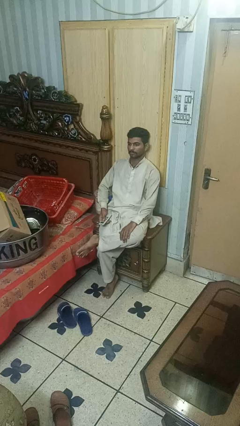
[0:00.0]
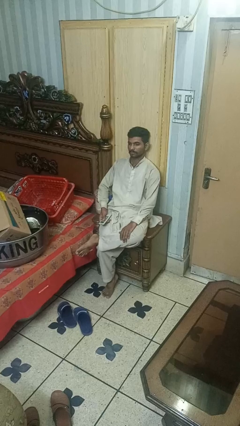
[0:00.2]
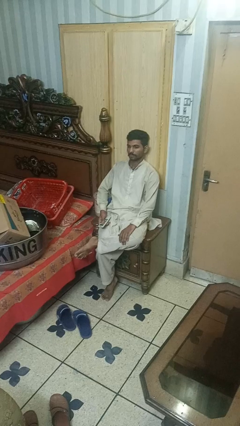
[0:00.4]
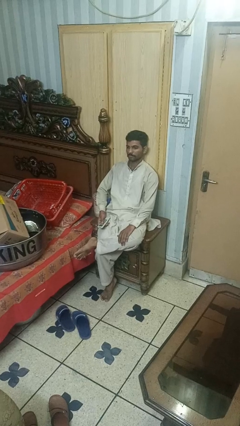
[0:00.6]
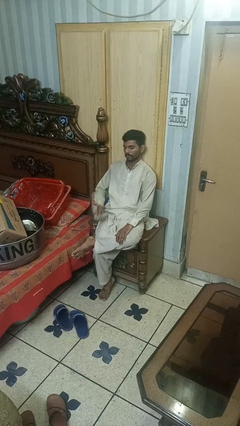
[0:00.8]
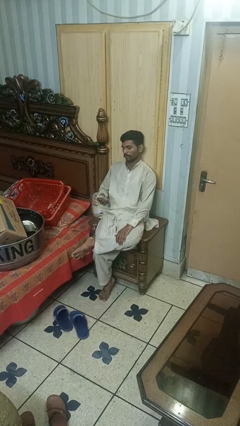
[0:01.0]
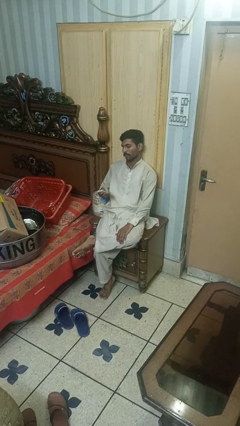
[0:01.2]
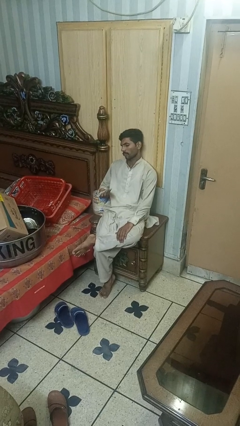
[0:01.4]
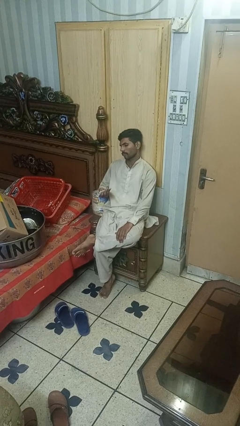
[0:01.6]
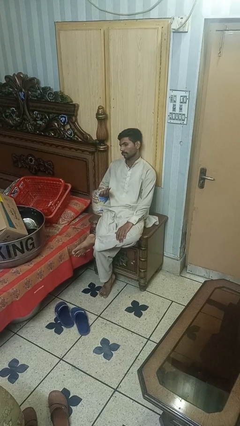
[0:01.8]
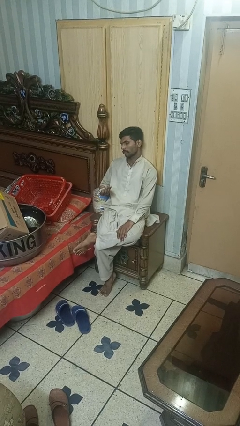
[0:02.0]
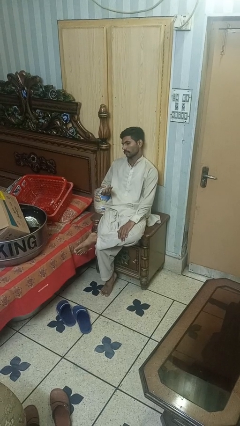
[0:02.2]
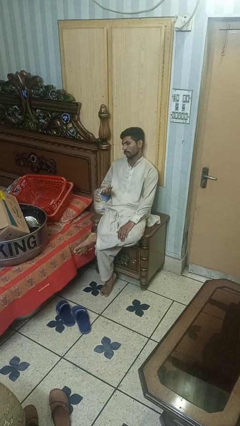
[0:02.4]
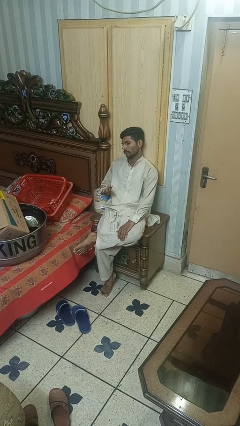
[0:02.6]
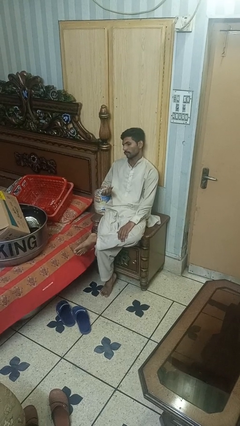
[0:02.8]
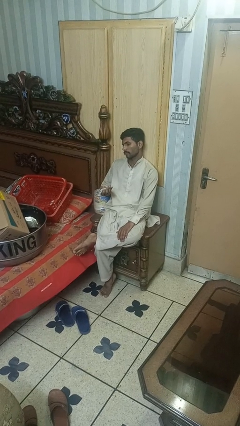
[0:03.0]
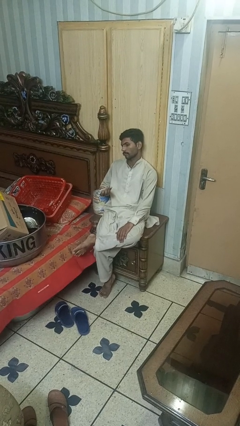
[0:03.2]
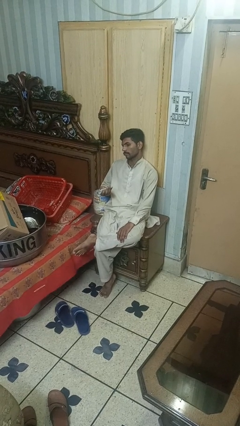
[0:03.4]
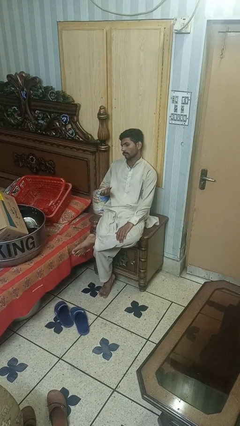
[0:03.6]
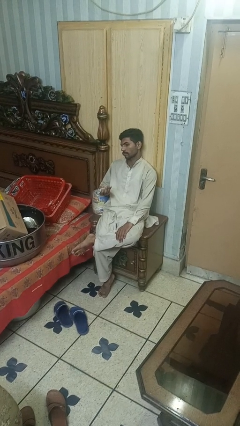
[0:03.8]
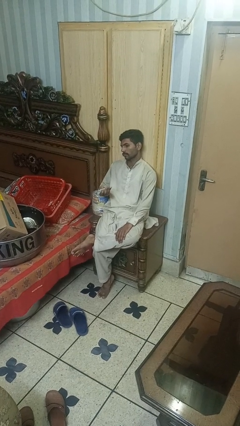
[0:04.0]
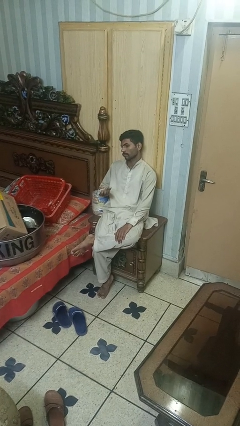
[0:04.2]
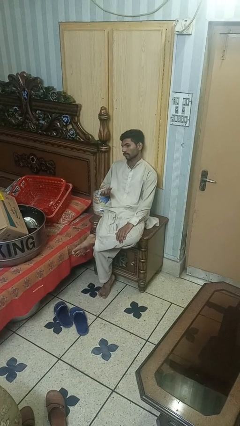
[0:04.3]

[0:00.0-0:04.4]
person uses television remote

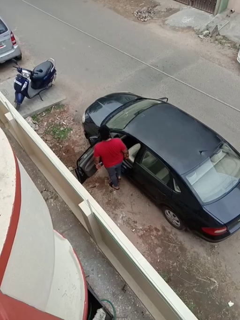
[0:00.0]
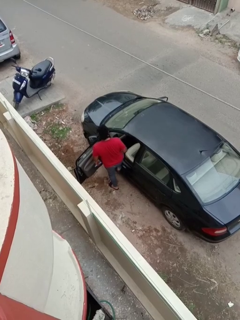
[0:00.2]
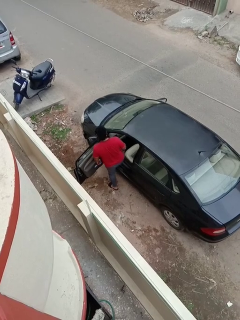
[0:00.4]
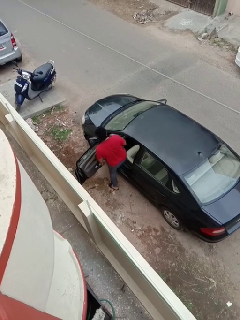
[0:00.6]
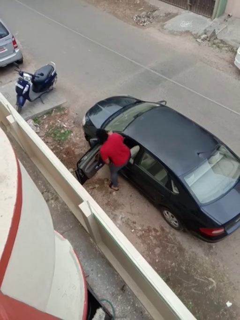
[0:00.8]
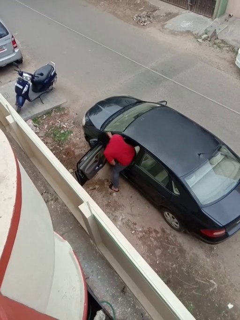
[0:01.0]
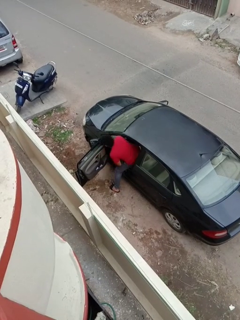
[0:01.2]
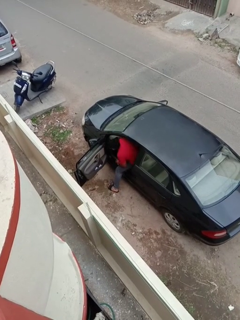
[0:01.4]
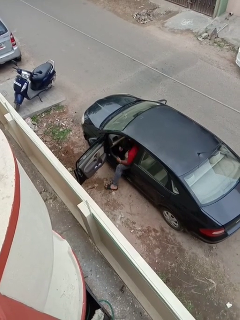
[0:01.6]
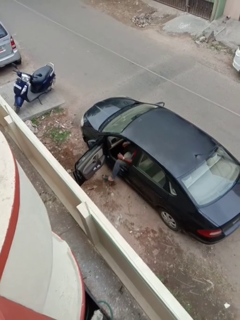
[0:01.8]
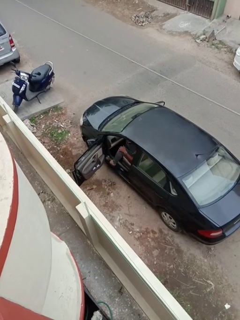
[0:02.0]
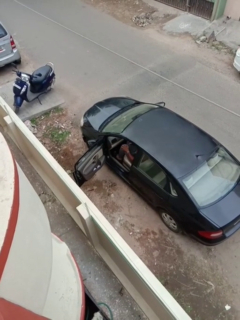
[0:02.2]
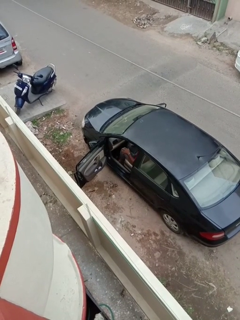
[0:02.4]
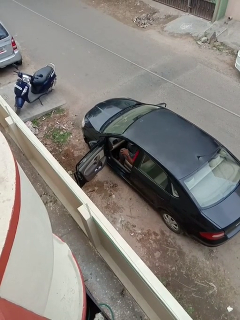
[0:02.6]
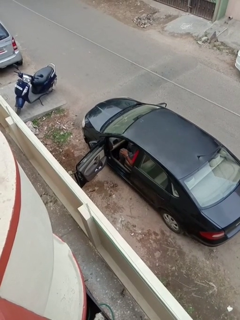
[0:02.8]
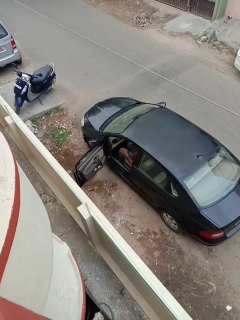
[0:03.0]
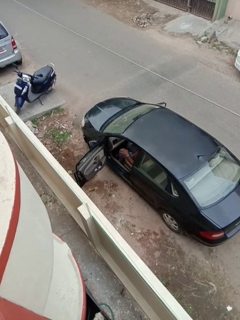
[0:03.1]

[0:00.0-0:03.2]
person enters car

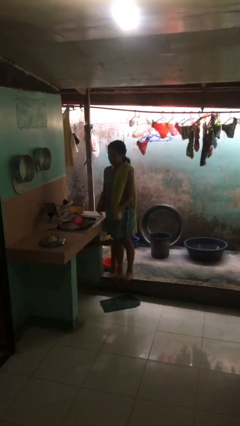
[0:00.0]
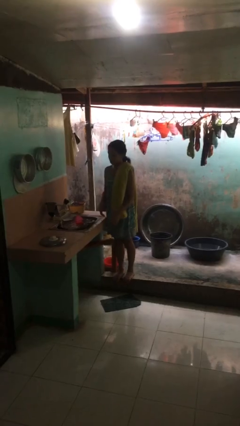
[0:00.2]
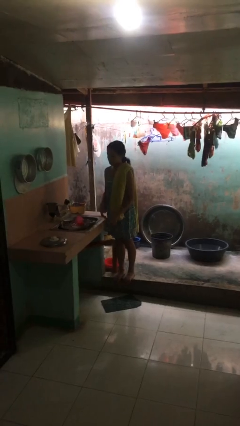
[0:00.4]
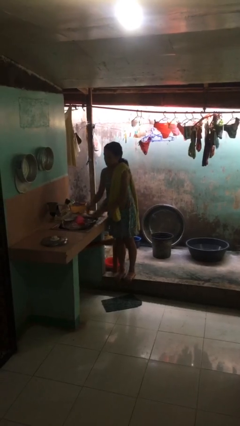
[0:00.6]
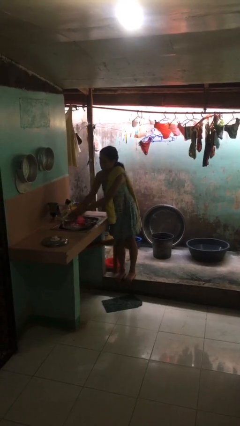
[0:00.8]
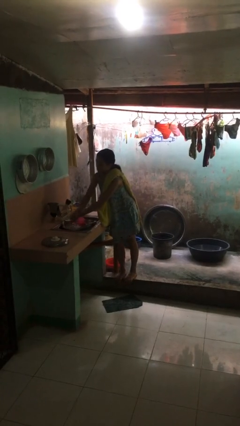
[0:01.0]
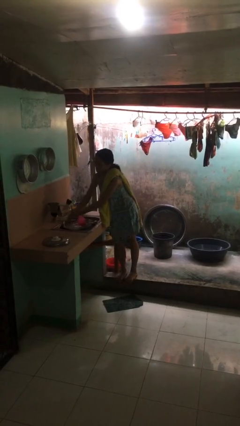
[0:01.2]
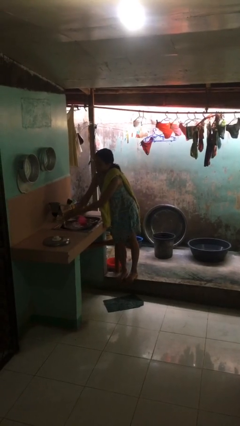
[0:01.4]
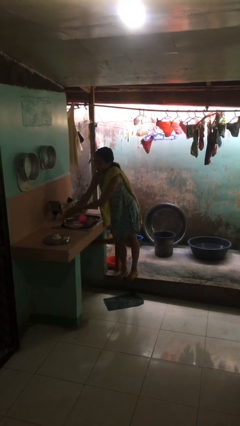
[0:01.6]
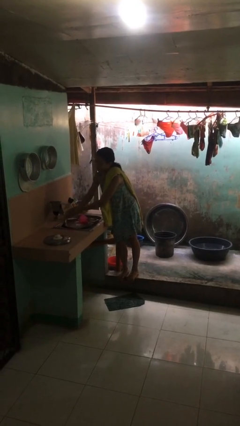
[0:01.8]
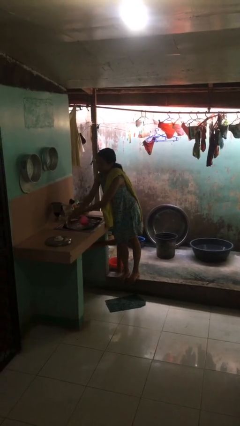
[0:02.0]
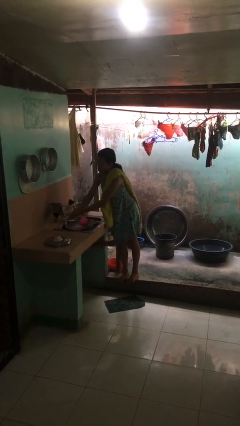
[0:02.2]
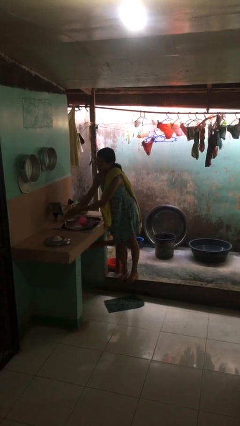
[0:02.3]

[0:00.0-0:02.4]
person washes hands

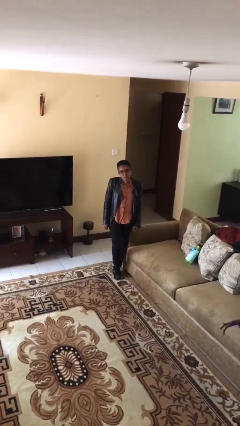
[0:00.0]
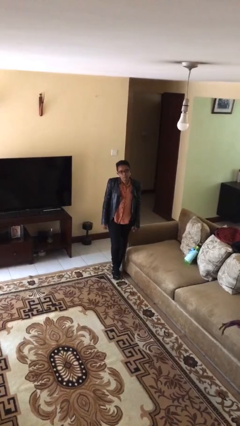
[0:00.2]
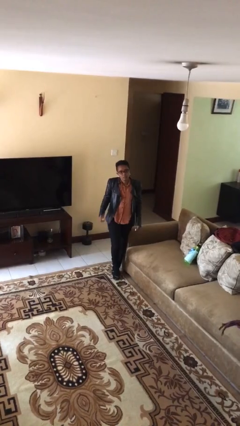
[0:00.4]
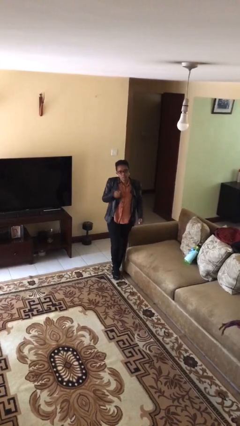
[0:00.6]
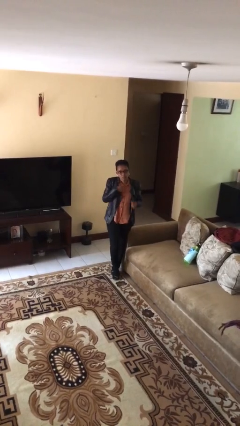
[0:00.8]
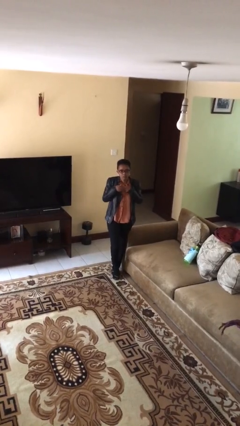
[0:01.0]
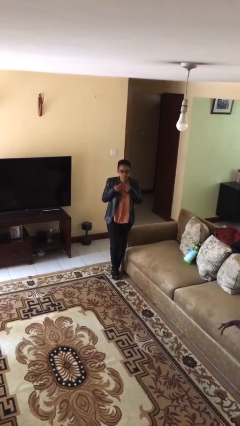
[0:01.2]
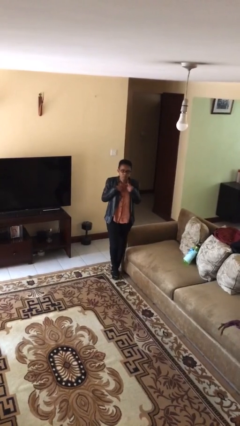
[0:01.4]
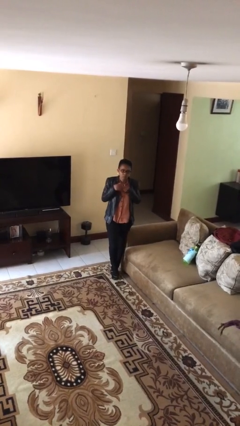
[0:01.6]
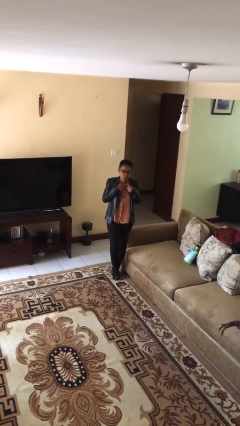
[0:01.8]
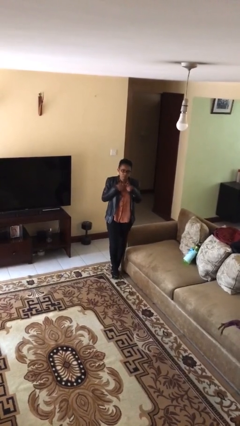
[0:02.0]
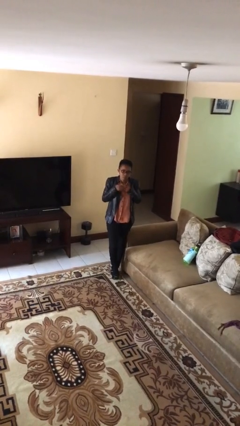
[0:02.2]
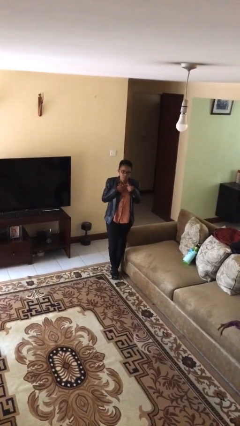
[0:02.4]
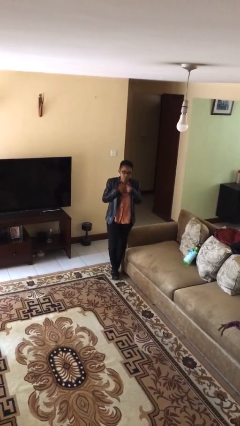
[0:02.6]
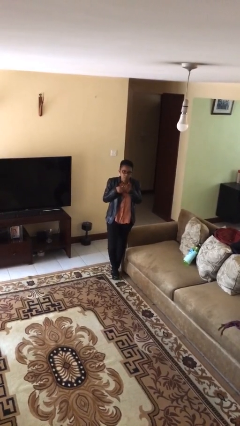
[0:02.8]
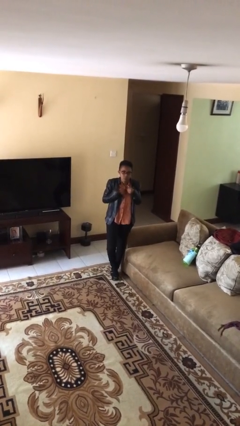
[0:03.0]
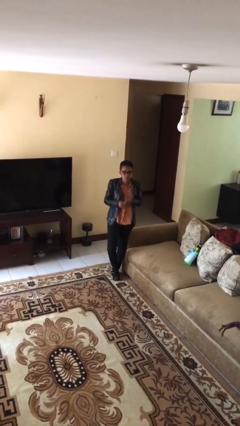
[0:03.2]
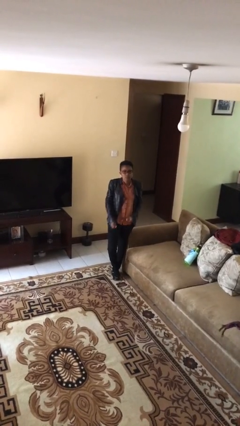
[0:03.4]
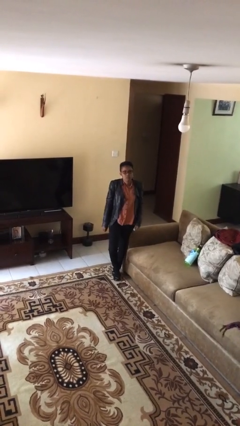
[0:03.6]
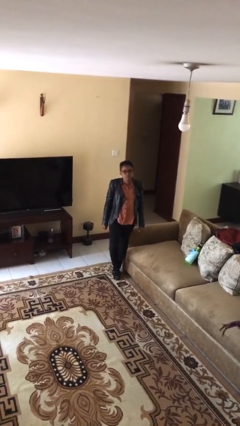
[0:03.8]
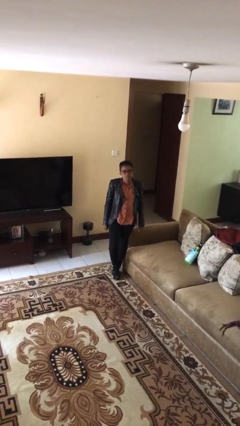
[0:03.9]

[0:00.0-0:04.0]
person drums on chest

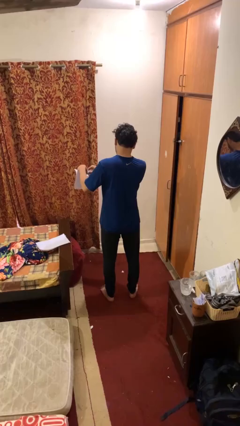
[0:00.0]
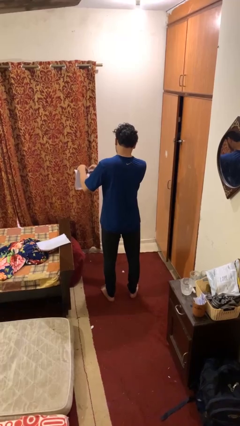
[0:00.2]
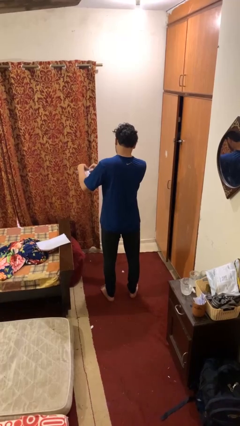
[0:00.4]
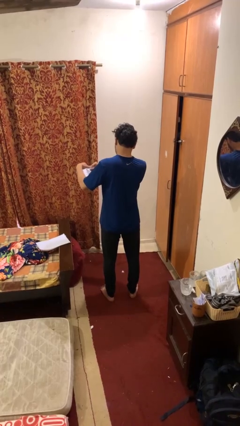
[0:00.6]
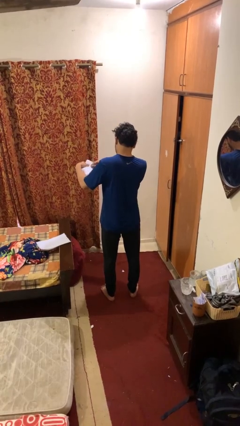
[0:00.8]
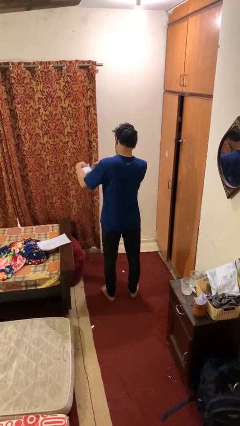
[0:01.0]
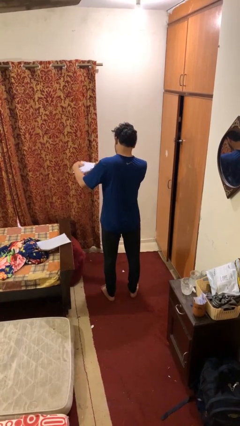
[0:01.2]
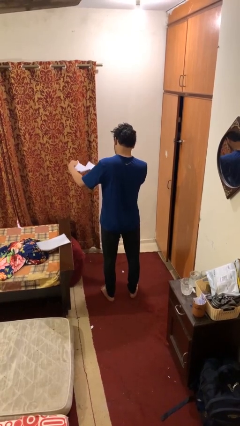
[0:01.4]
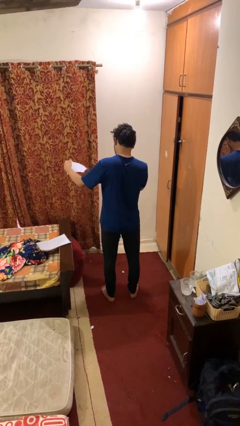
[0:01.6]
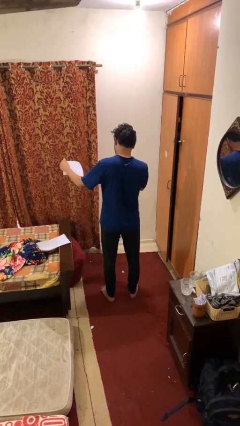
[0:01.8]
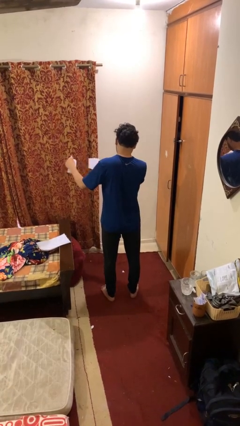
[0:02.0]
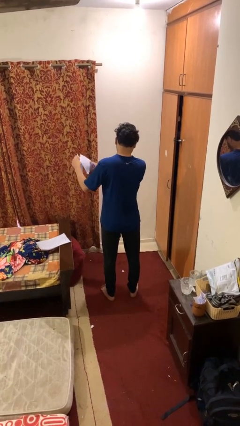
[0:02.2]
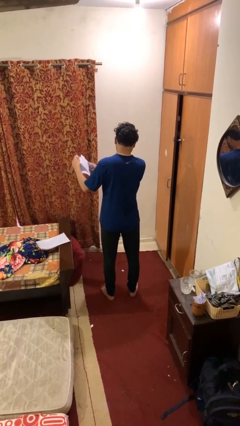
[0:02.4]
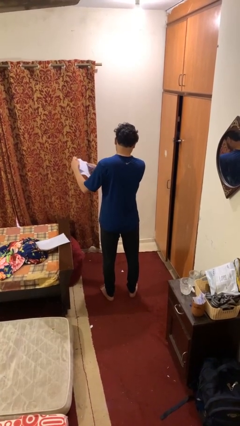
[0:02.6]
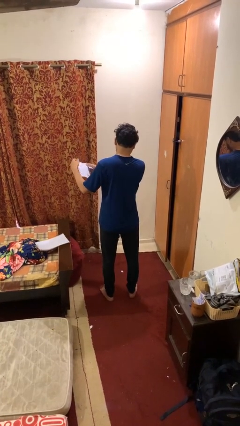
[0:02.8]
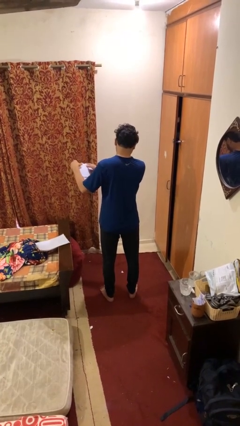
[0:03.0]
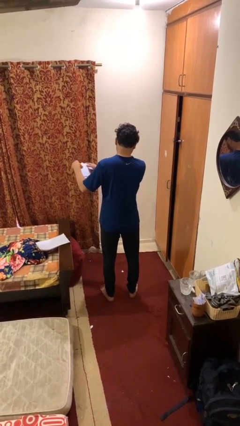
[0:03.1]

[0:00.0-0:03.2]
person tears paper

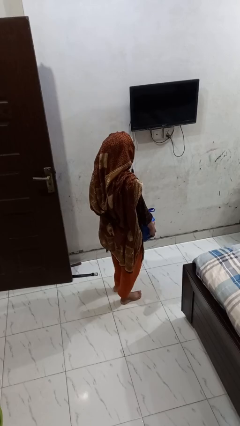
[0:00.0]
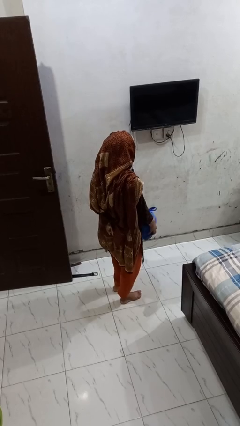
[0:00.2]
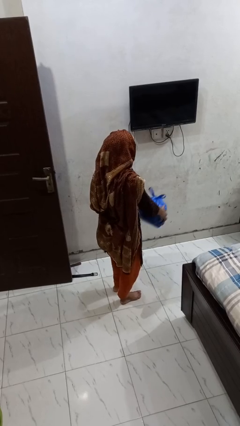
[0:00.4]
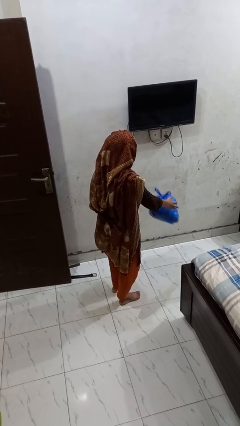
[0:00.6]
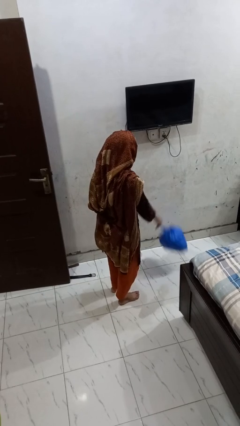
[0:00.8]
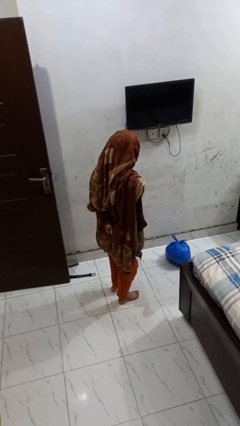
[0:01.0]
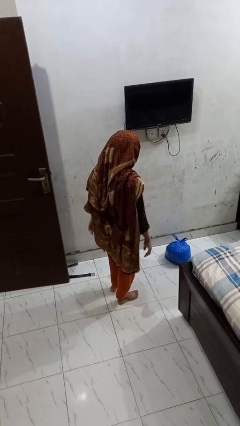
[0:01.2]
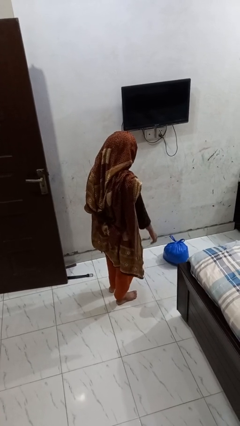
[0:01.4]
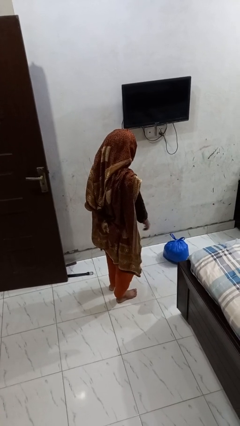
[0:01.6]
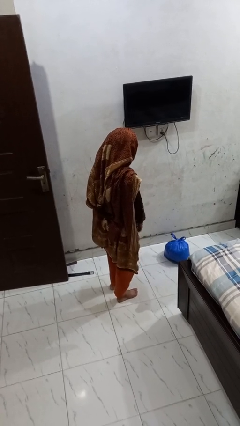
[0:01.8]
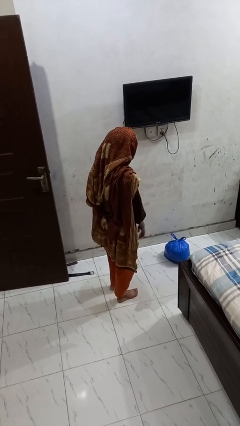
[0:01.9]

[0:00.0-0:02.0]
person throws object to ground
